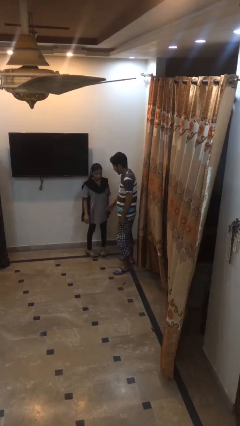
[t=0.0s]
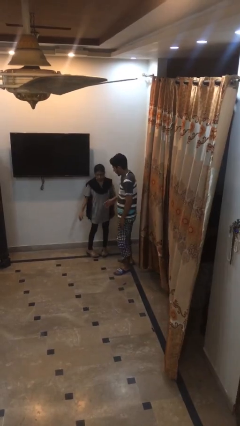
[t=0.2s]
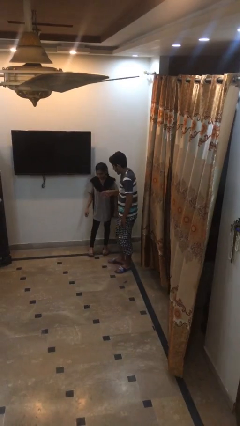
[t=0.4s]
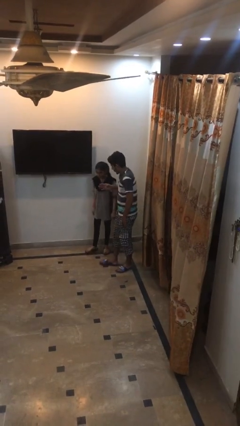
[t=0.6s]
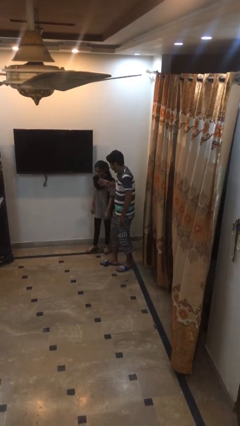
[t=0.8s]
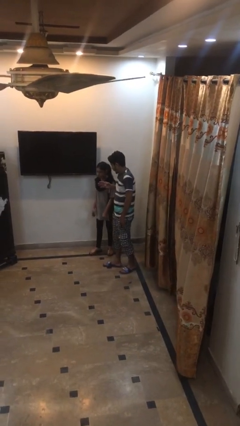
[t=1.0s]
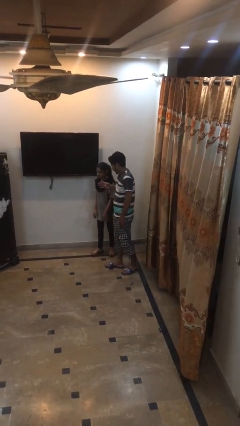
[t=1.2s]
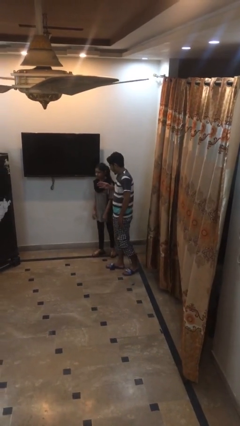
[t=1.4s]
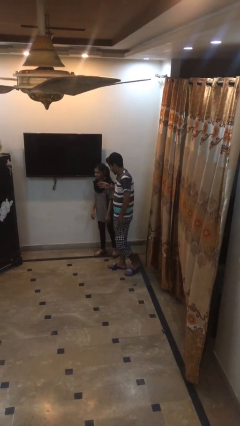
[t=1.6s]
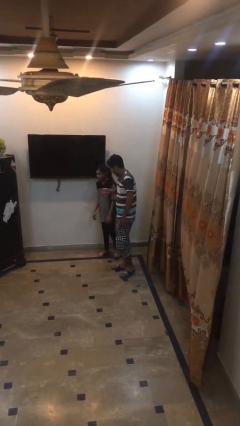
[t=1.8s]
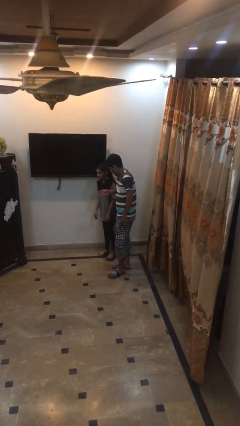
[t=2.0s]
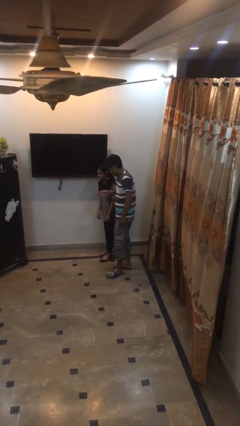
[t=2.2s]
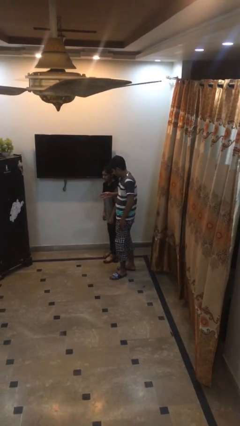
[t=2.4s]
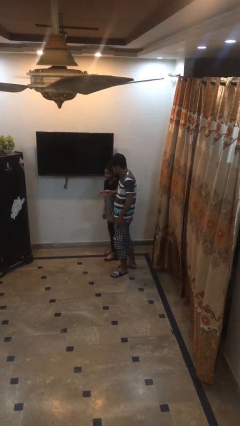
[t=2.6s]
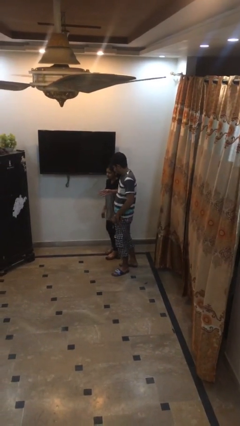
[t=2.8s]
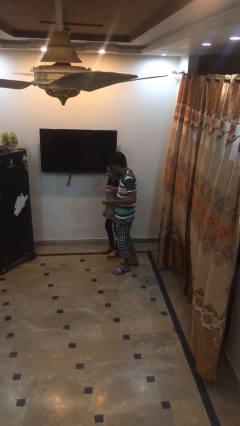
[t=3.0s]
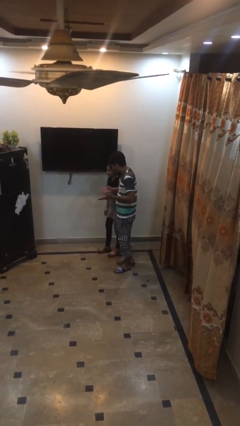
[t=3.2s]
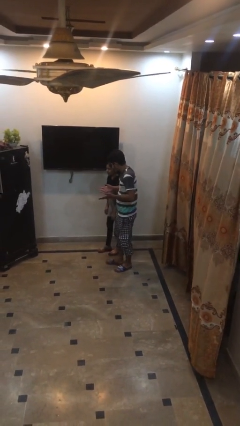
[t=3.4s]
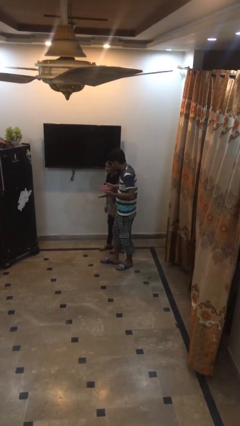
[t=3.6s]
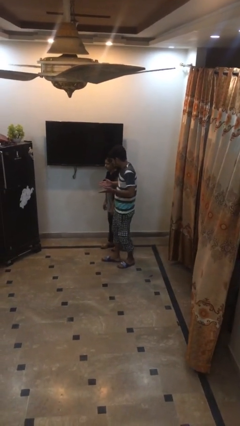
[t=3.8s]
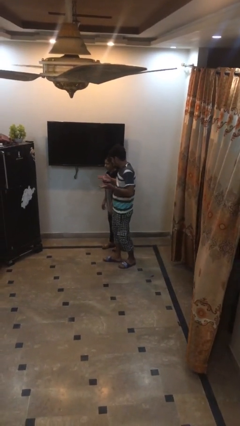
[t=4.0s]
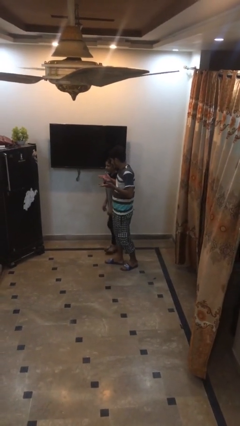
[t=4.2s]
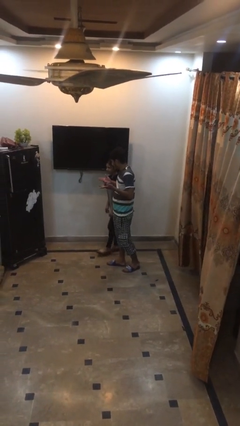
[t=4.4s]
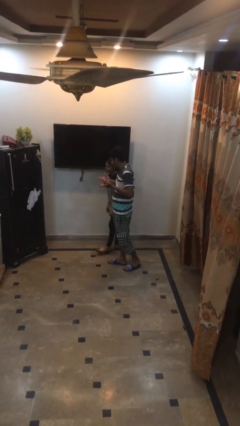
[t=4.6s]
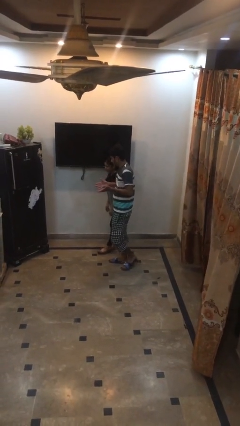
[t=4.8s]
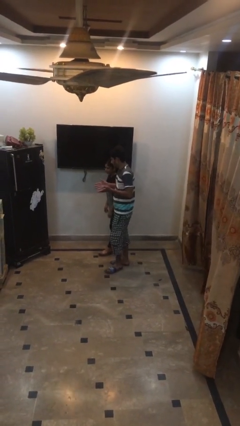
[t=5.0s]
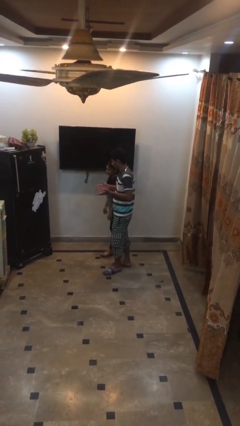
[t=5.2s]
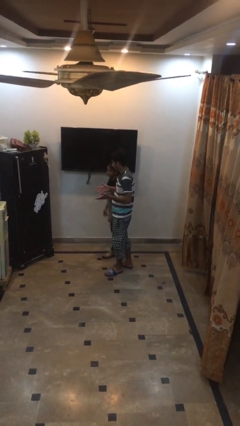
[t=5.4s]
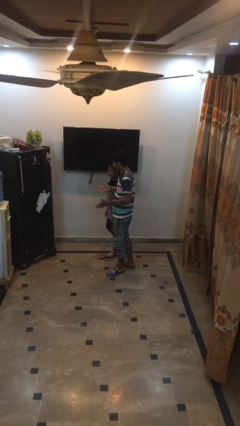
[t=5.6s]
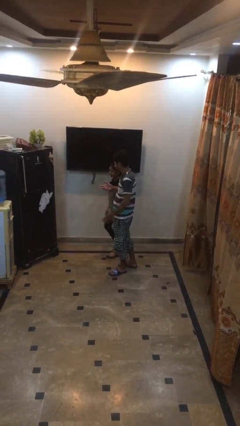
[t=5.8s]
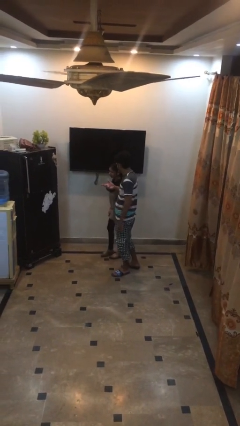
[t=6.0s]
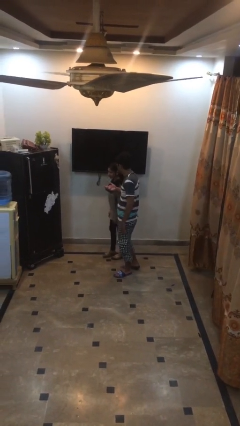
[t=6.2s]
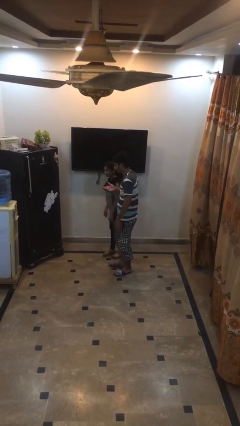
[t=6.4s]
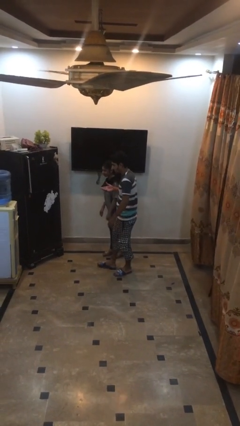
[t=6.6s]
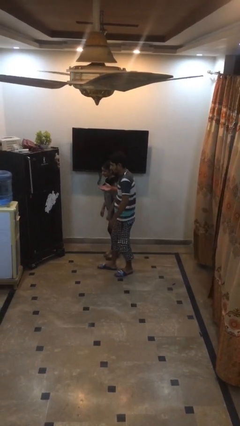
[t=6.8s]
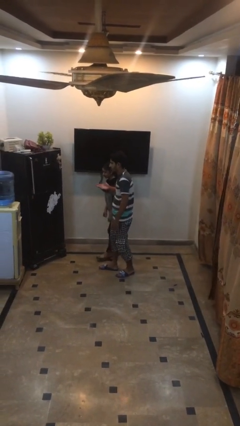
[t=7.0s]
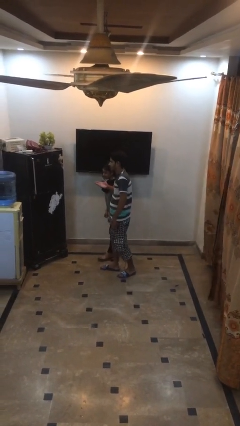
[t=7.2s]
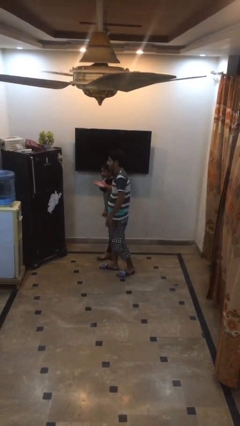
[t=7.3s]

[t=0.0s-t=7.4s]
person talks to person

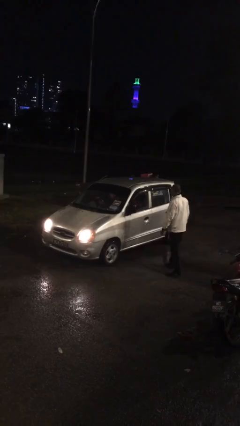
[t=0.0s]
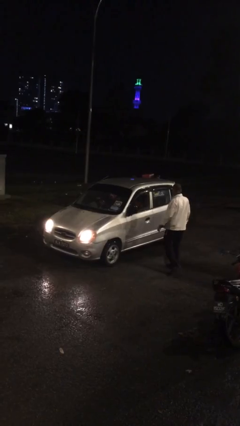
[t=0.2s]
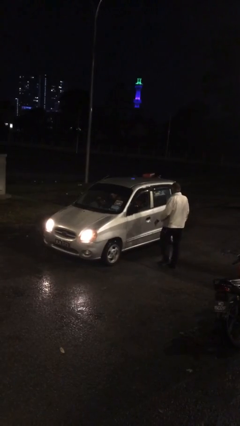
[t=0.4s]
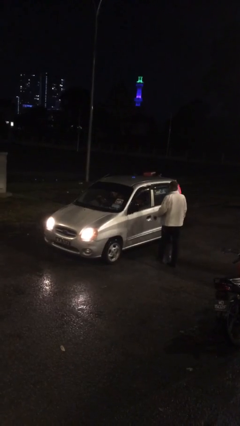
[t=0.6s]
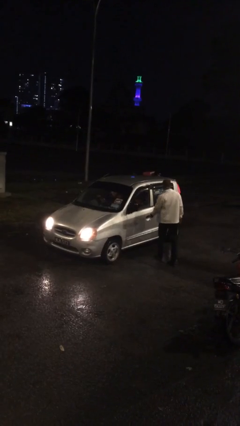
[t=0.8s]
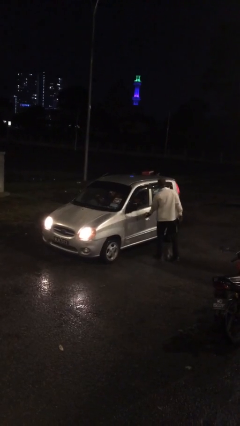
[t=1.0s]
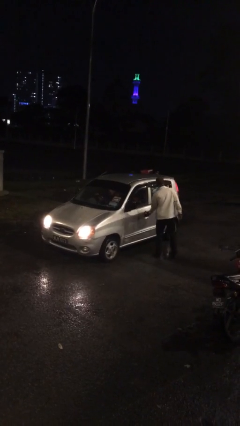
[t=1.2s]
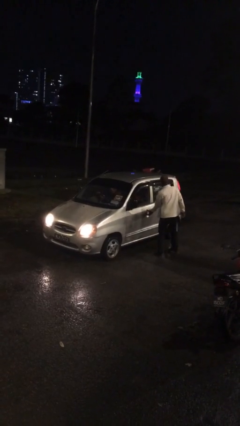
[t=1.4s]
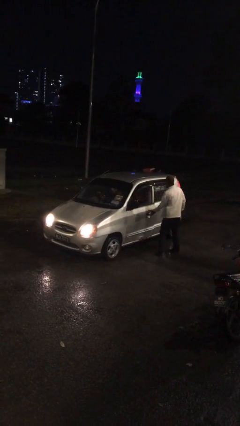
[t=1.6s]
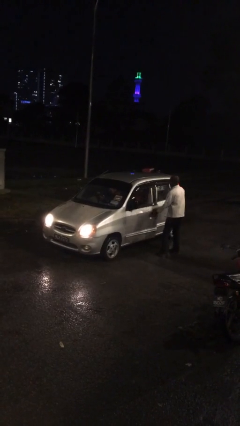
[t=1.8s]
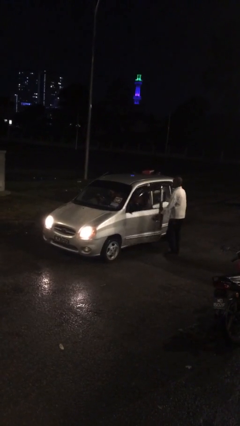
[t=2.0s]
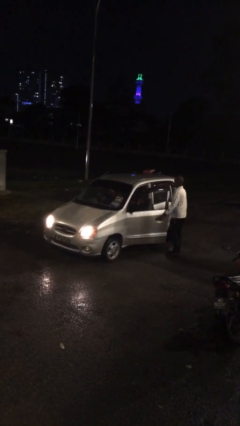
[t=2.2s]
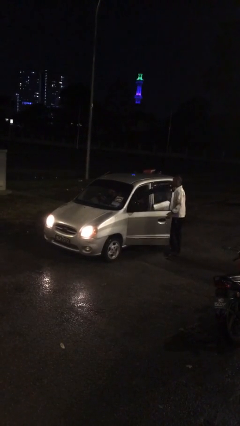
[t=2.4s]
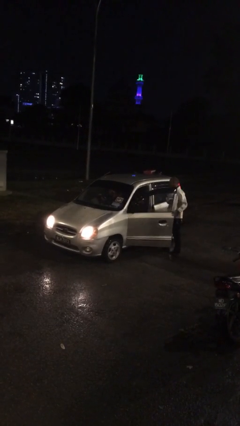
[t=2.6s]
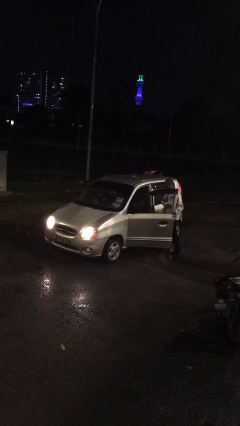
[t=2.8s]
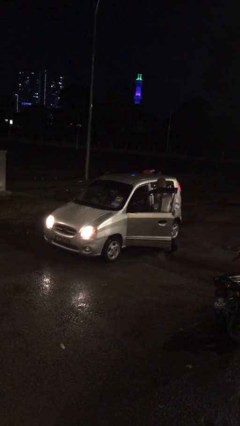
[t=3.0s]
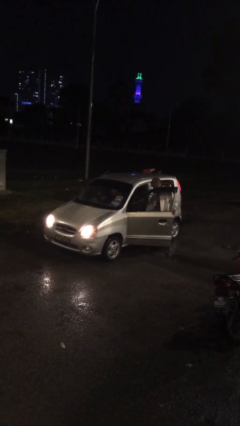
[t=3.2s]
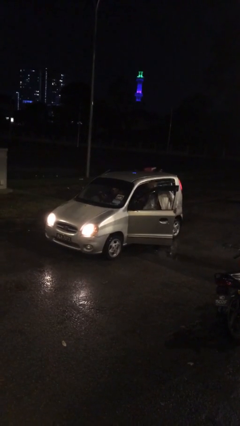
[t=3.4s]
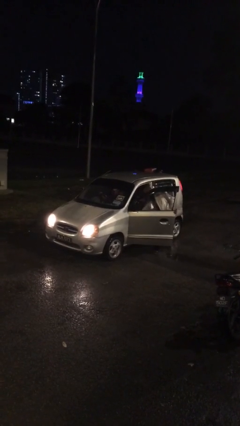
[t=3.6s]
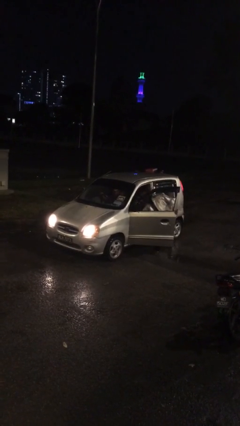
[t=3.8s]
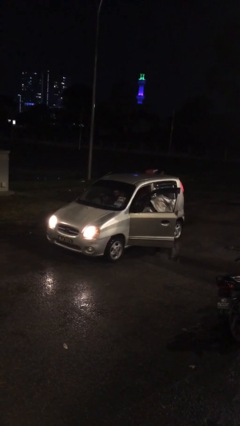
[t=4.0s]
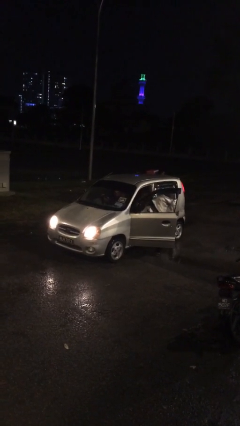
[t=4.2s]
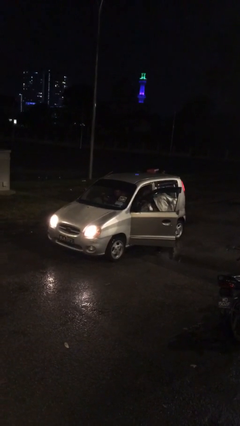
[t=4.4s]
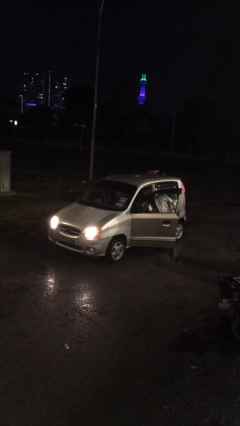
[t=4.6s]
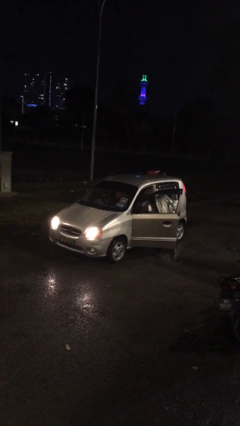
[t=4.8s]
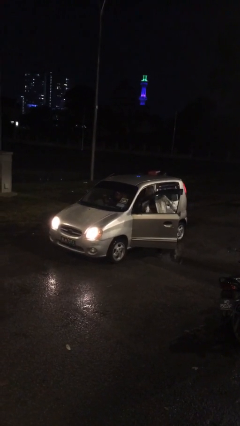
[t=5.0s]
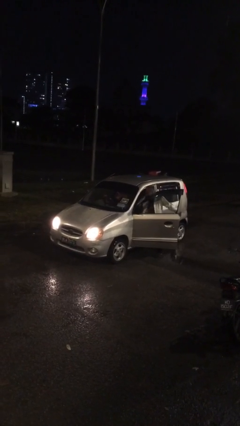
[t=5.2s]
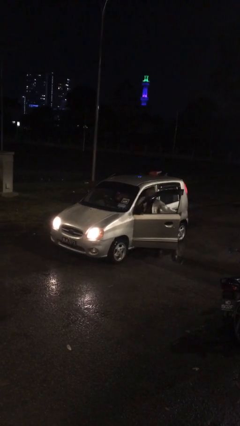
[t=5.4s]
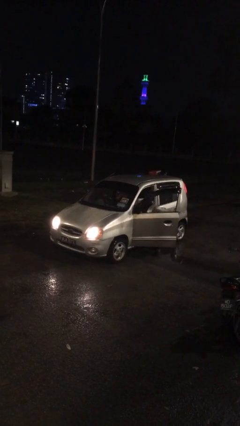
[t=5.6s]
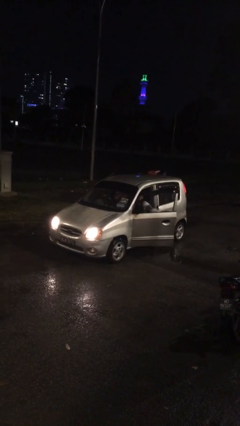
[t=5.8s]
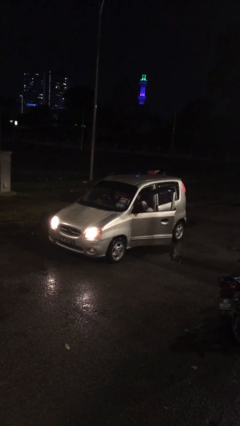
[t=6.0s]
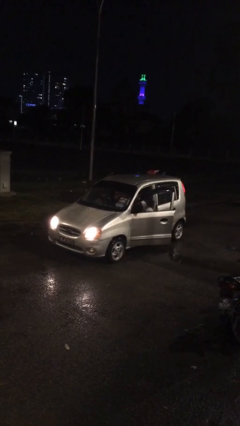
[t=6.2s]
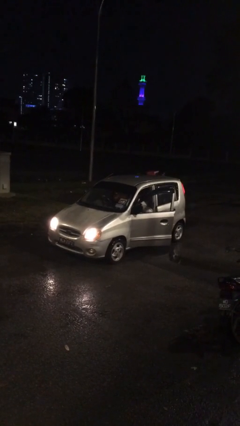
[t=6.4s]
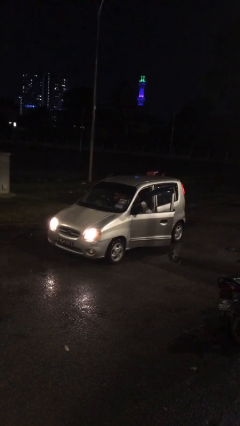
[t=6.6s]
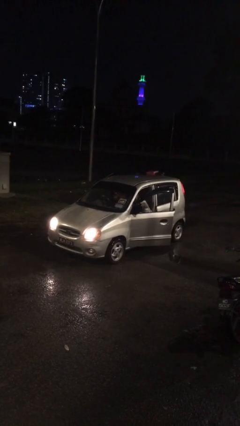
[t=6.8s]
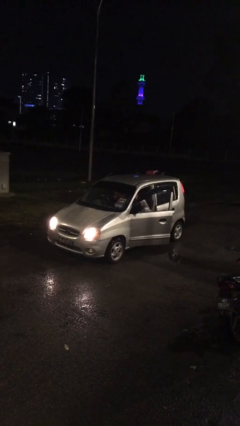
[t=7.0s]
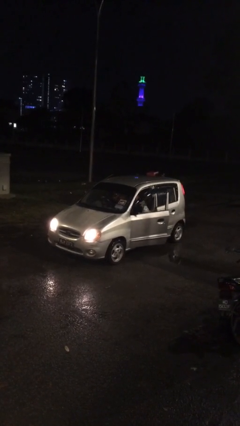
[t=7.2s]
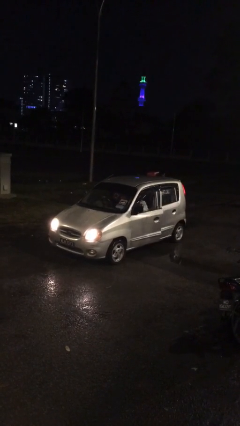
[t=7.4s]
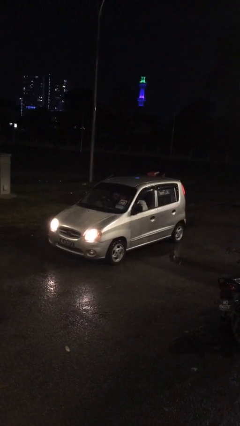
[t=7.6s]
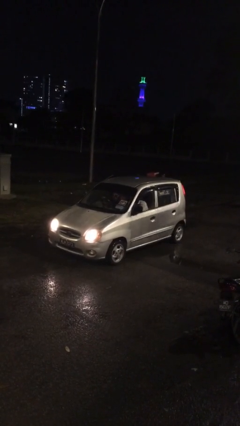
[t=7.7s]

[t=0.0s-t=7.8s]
car picks up person

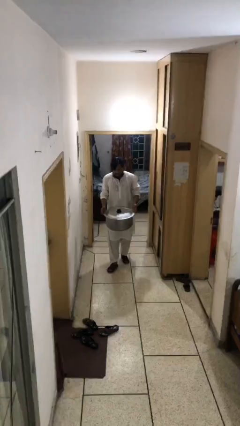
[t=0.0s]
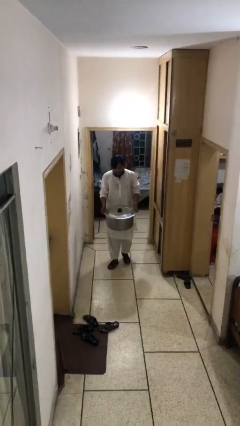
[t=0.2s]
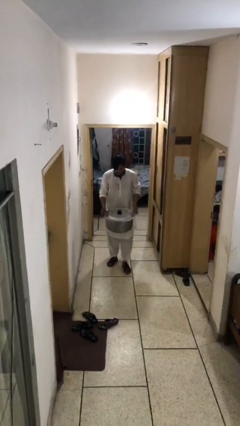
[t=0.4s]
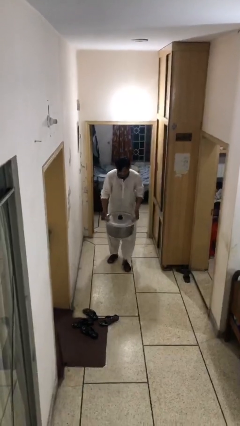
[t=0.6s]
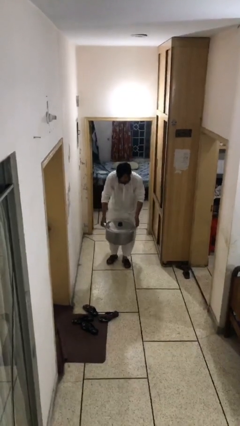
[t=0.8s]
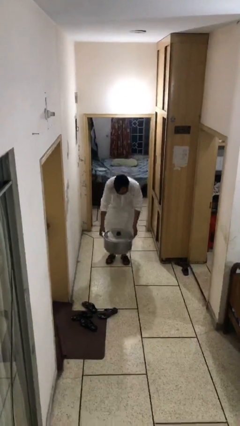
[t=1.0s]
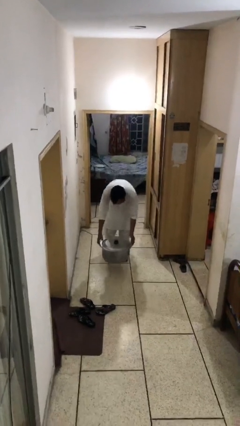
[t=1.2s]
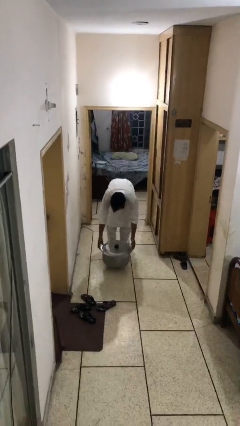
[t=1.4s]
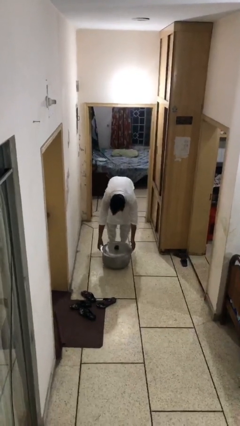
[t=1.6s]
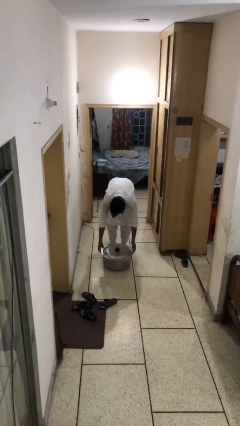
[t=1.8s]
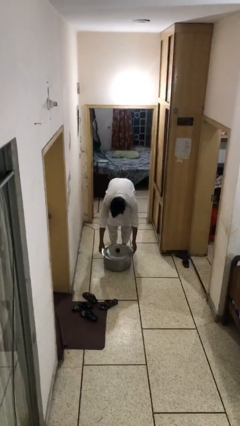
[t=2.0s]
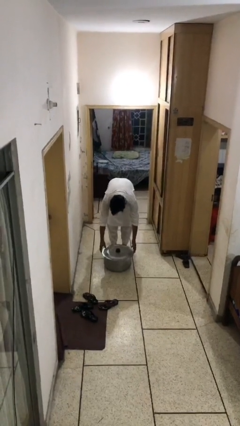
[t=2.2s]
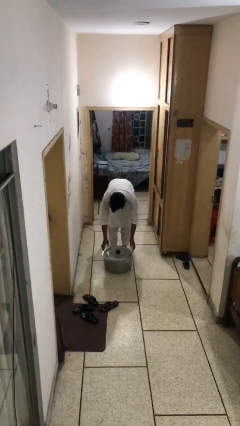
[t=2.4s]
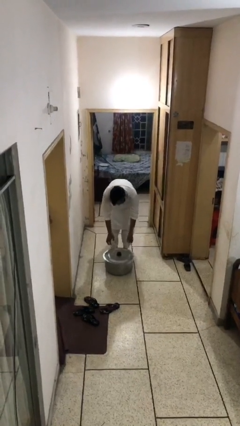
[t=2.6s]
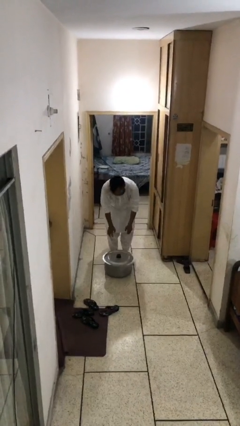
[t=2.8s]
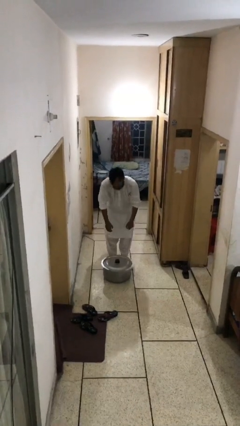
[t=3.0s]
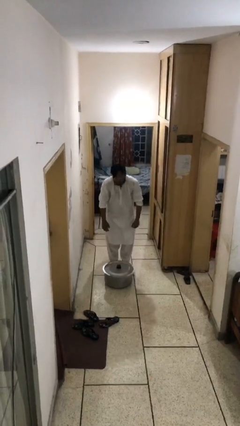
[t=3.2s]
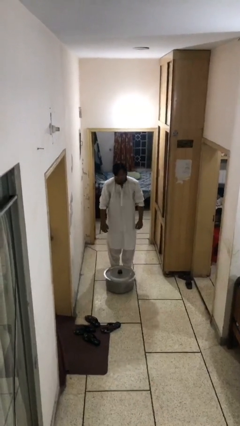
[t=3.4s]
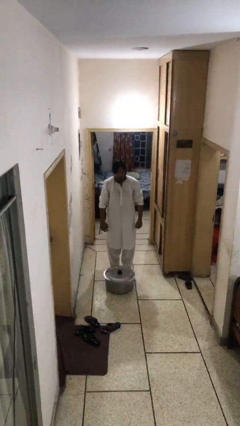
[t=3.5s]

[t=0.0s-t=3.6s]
person puts down object on floor
